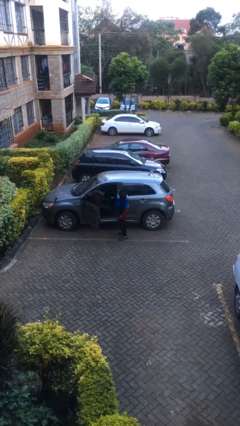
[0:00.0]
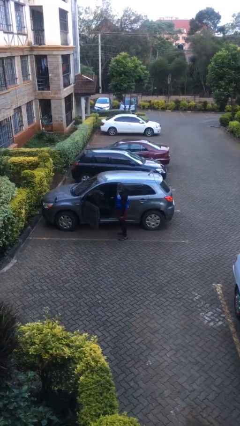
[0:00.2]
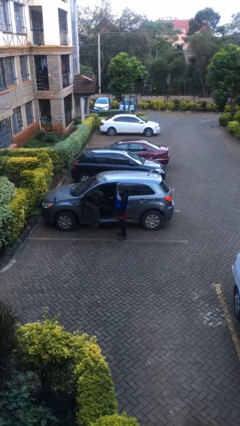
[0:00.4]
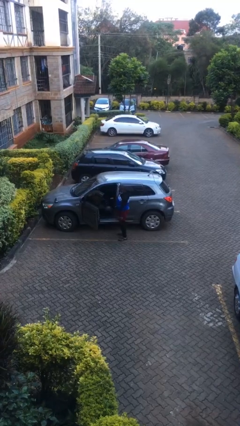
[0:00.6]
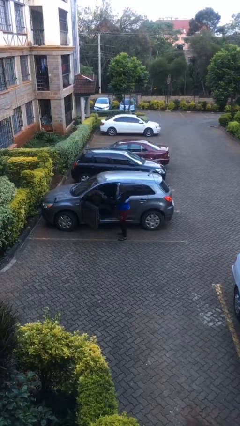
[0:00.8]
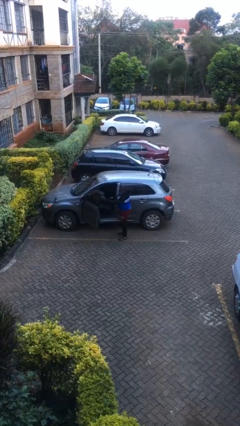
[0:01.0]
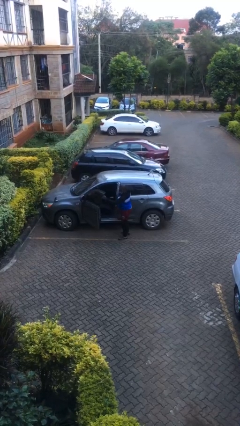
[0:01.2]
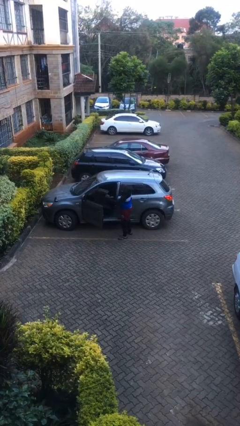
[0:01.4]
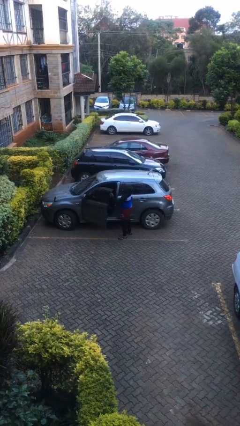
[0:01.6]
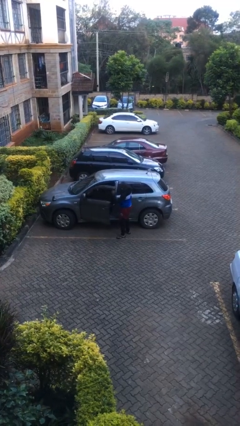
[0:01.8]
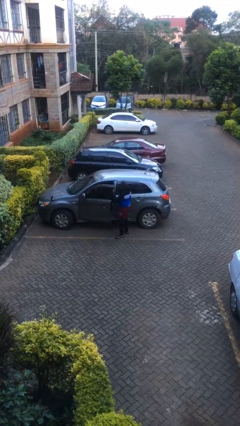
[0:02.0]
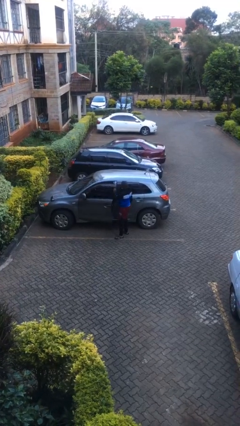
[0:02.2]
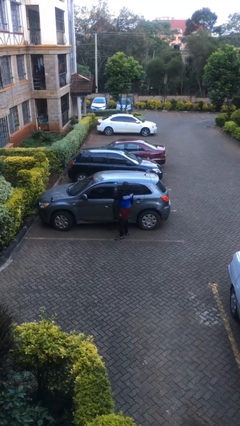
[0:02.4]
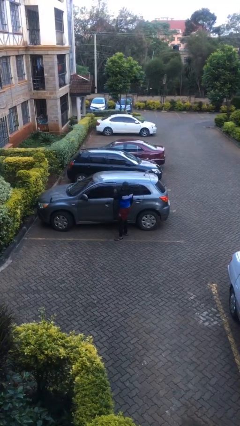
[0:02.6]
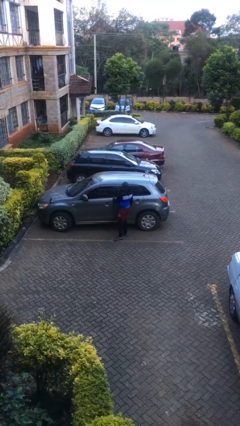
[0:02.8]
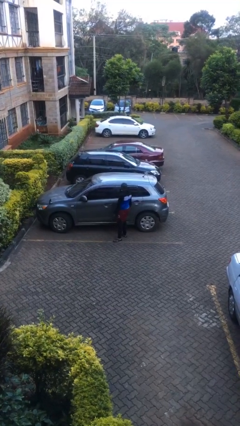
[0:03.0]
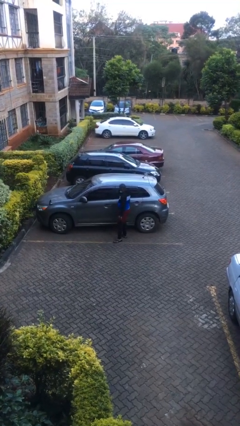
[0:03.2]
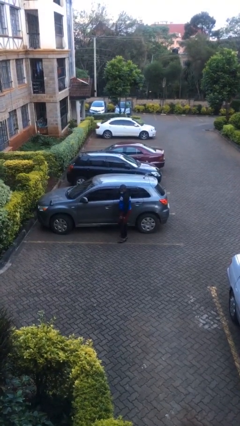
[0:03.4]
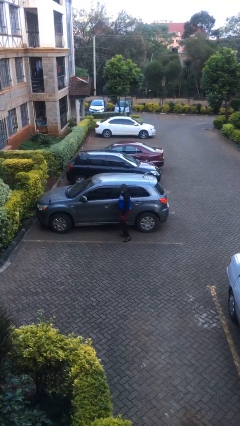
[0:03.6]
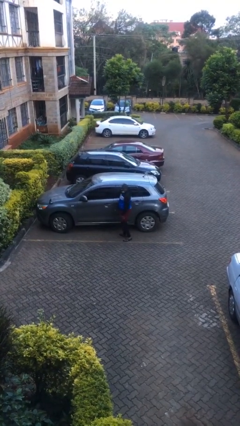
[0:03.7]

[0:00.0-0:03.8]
person closes car door

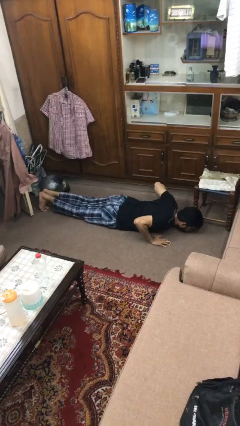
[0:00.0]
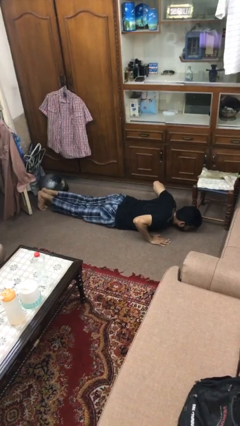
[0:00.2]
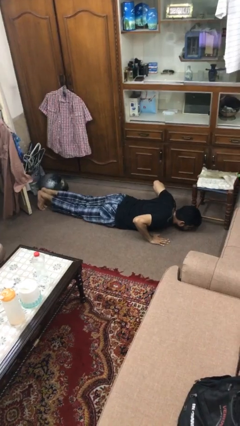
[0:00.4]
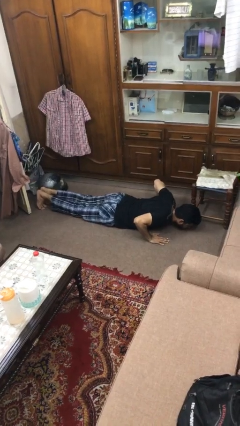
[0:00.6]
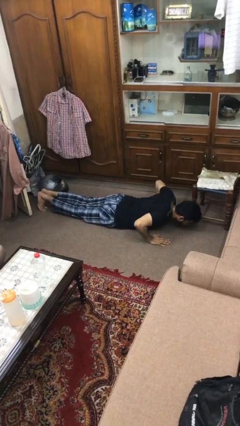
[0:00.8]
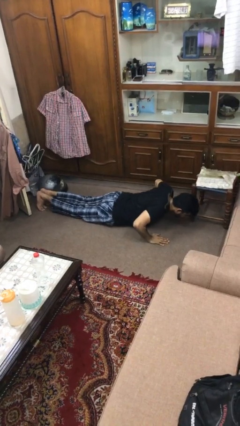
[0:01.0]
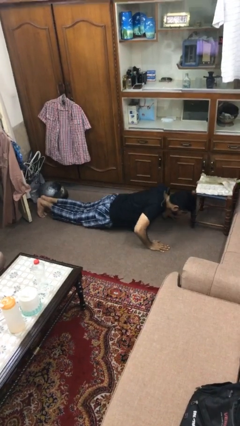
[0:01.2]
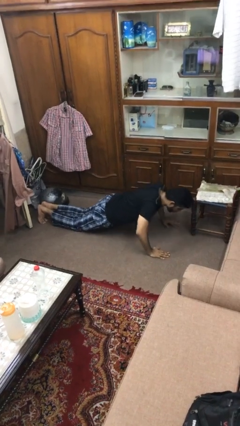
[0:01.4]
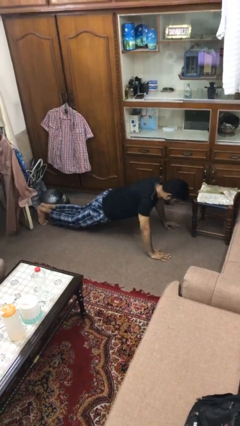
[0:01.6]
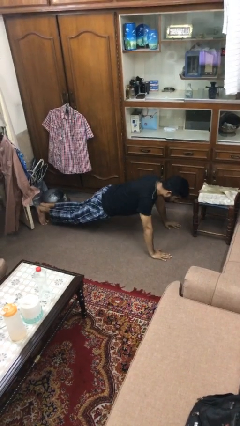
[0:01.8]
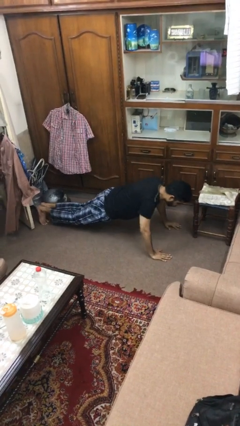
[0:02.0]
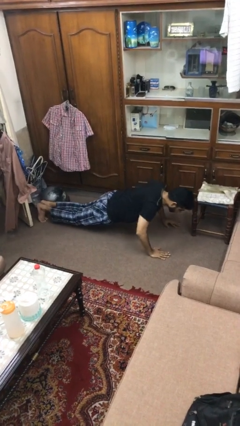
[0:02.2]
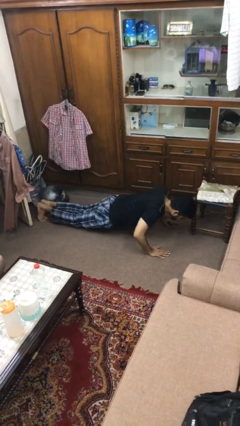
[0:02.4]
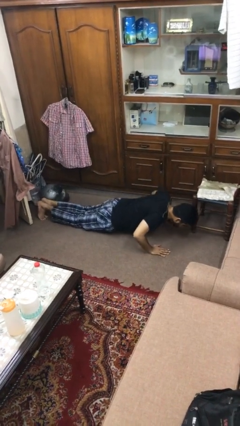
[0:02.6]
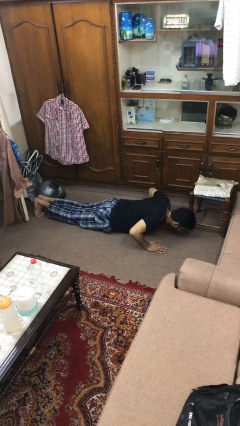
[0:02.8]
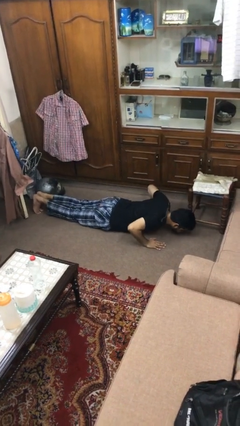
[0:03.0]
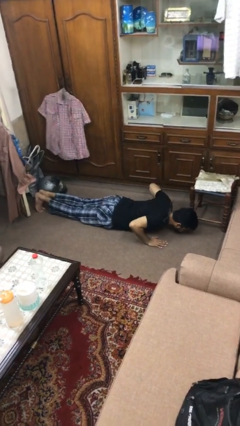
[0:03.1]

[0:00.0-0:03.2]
person exercises with pushup

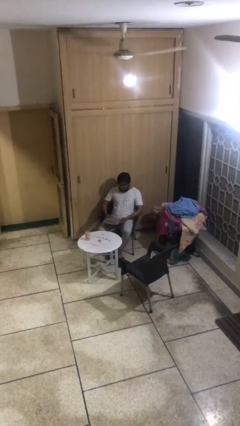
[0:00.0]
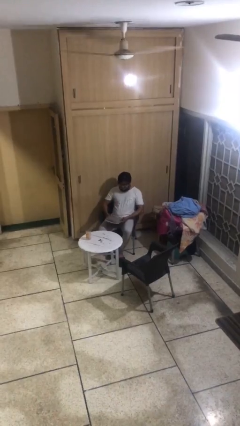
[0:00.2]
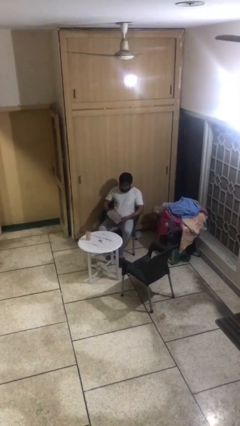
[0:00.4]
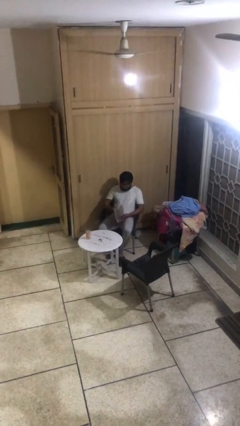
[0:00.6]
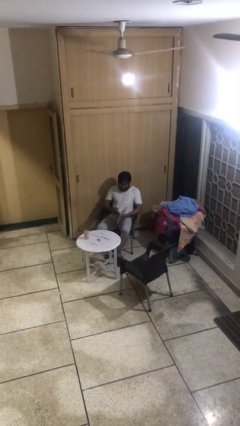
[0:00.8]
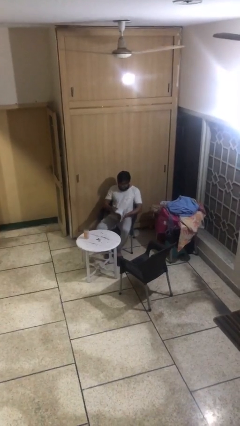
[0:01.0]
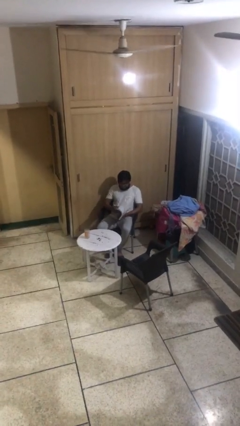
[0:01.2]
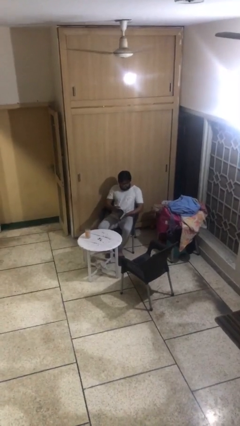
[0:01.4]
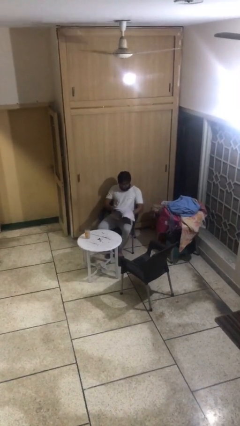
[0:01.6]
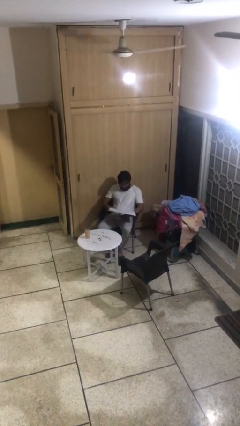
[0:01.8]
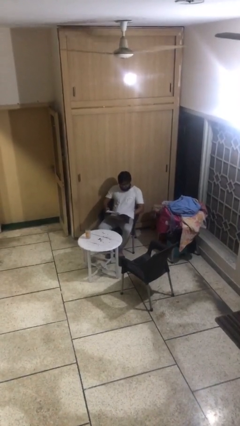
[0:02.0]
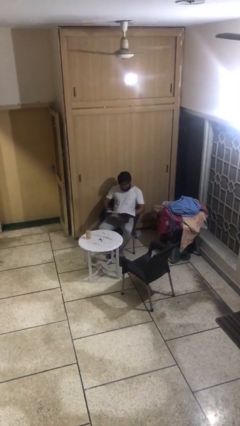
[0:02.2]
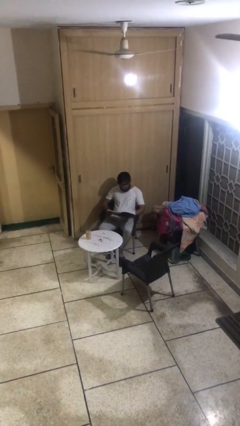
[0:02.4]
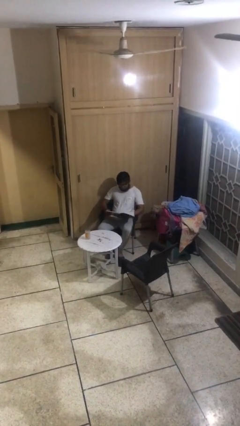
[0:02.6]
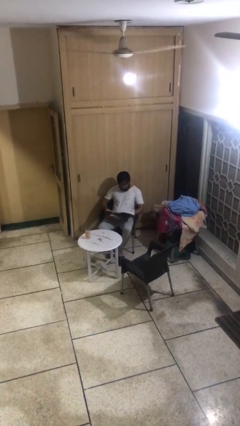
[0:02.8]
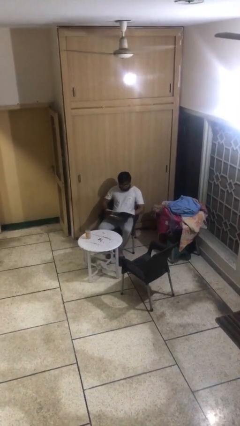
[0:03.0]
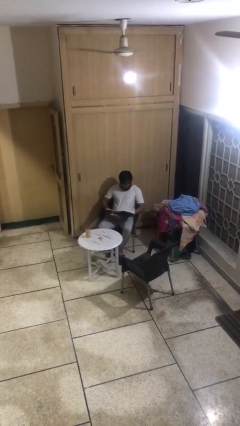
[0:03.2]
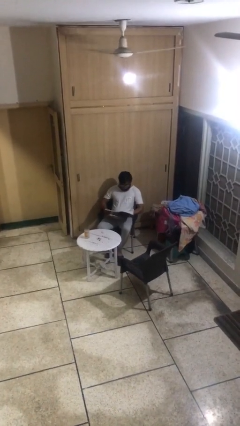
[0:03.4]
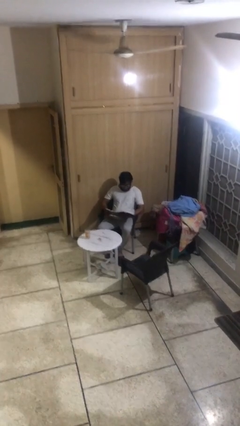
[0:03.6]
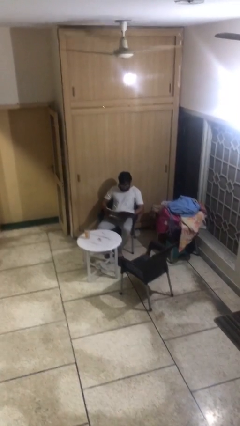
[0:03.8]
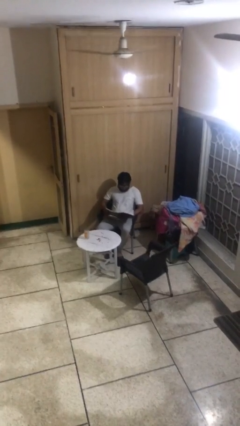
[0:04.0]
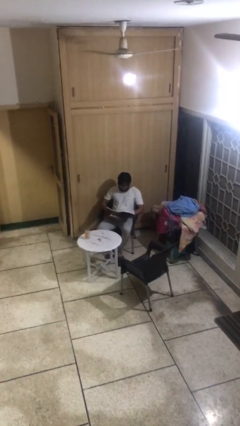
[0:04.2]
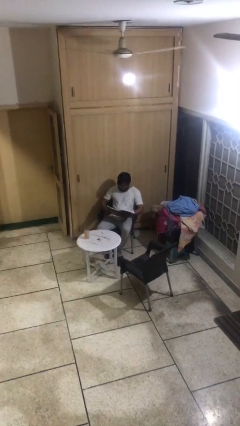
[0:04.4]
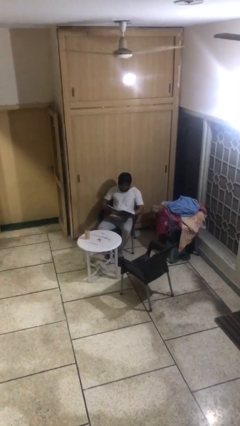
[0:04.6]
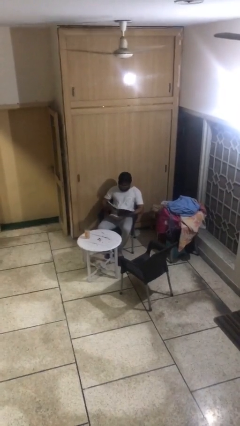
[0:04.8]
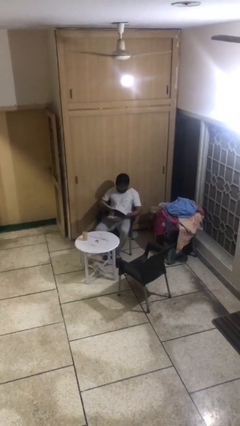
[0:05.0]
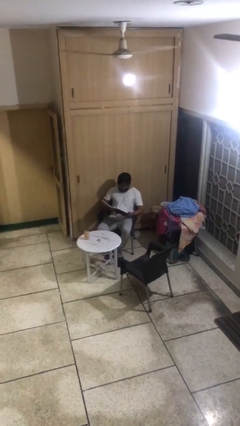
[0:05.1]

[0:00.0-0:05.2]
person reads document

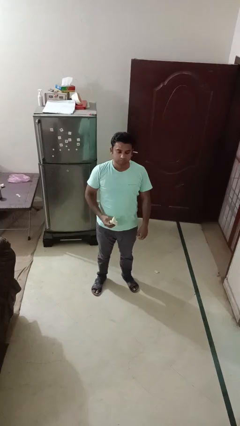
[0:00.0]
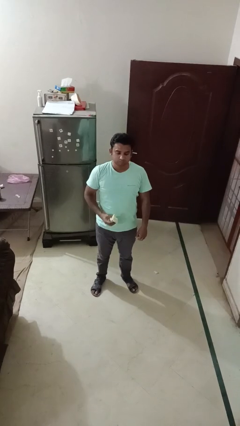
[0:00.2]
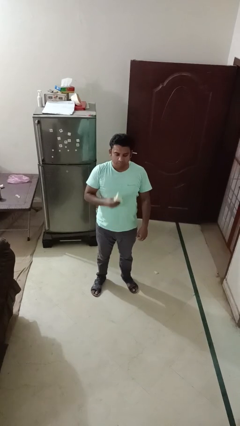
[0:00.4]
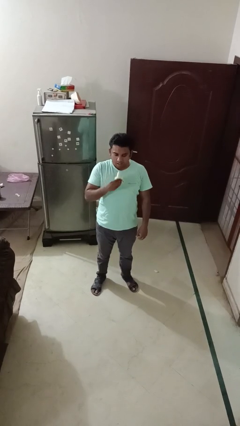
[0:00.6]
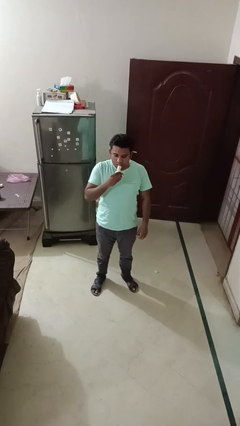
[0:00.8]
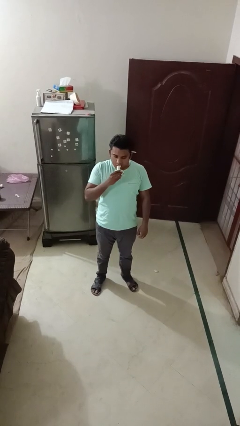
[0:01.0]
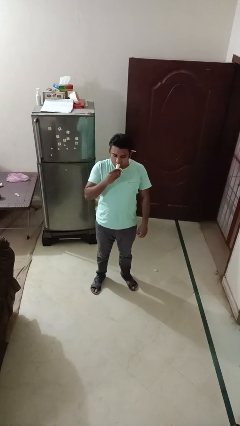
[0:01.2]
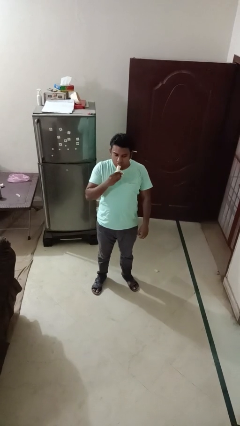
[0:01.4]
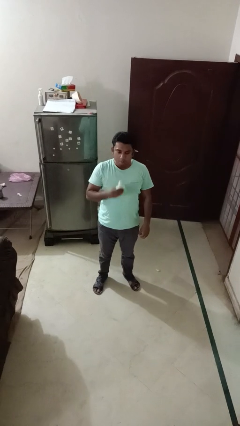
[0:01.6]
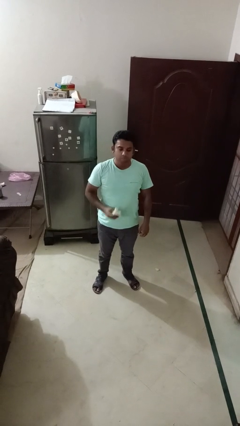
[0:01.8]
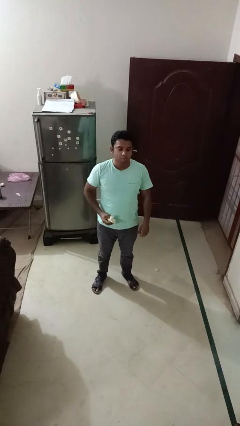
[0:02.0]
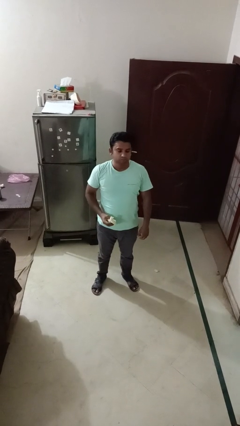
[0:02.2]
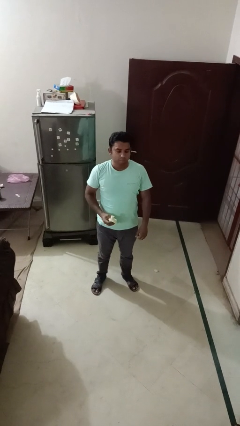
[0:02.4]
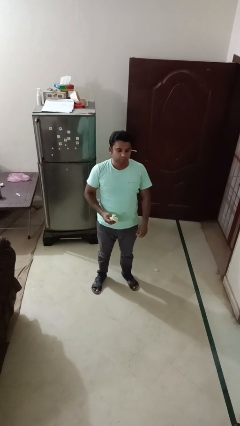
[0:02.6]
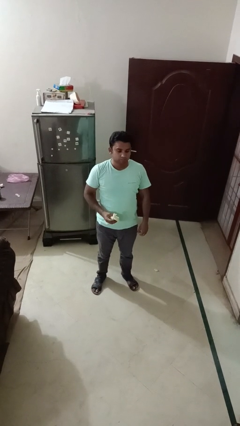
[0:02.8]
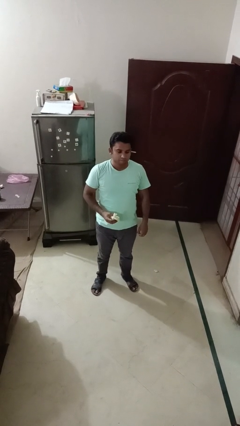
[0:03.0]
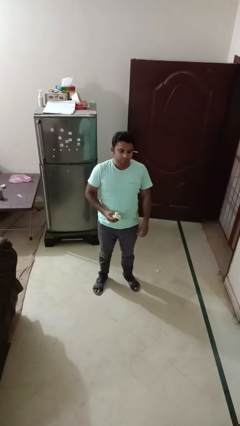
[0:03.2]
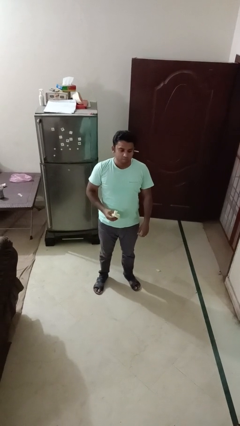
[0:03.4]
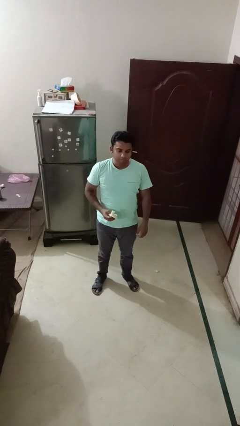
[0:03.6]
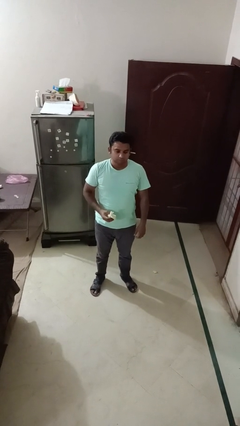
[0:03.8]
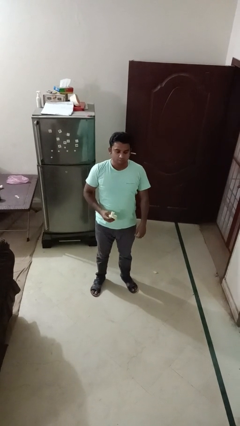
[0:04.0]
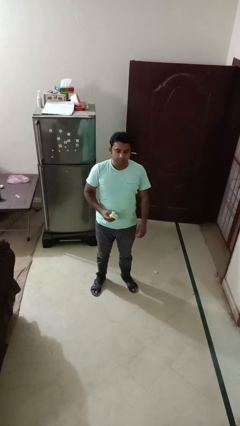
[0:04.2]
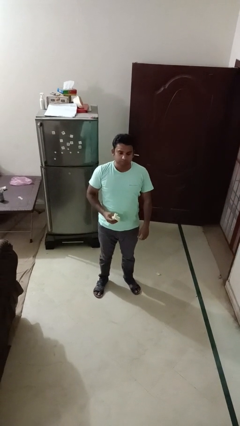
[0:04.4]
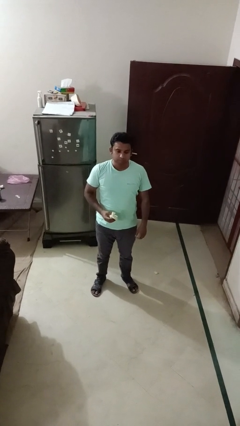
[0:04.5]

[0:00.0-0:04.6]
person eats banana

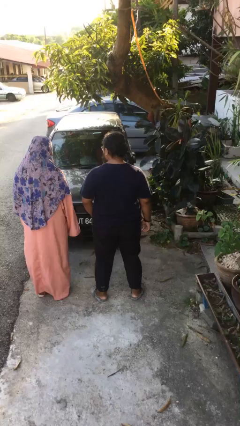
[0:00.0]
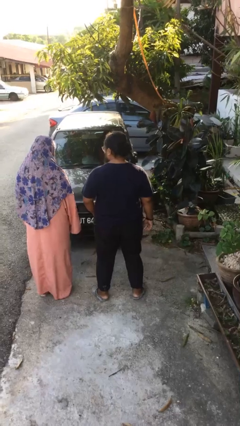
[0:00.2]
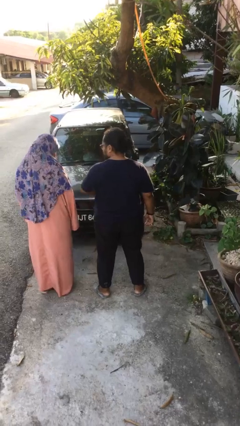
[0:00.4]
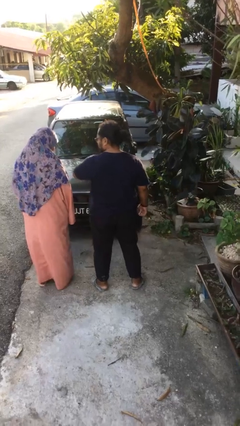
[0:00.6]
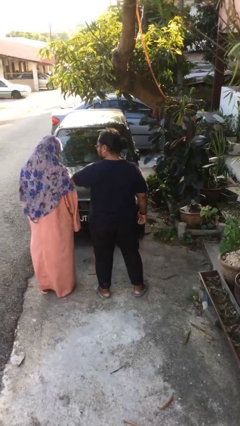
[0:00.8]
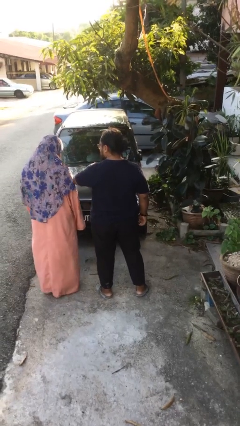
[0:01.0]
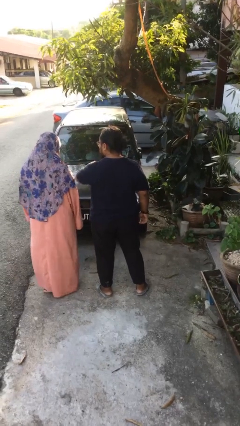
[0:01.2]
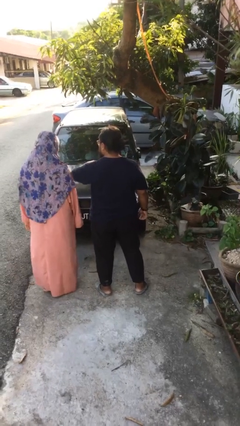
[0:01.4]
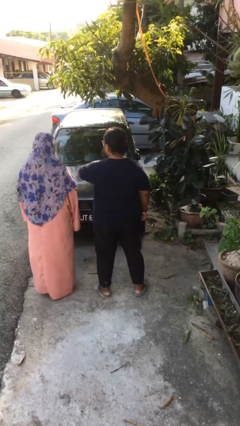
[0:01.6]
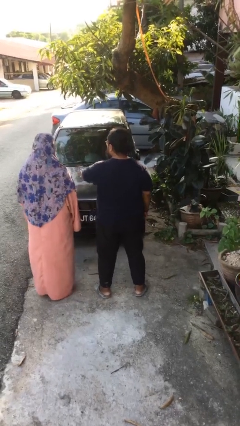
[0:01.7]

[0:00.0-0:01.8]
person nudges person with elbow
